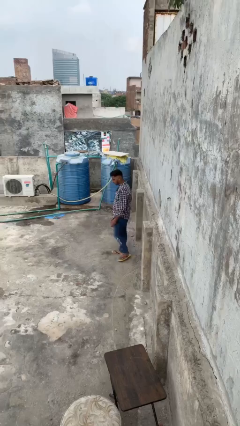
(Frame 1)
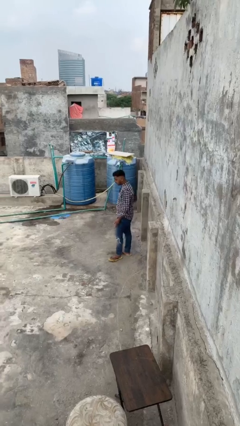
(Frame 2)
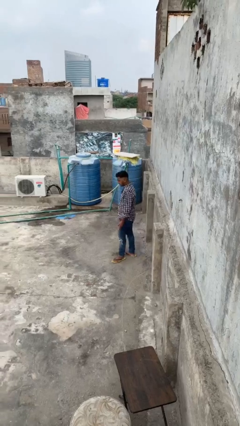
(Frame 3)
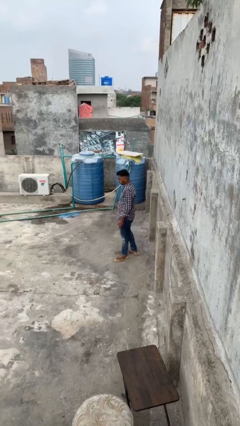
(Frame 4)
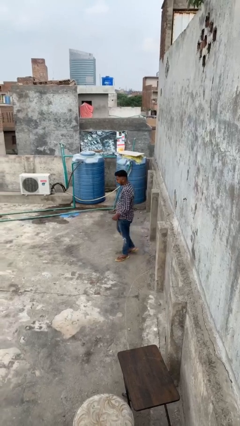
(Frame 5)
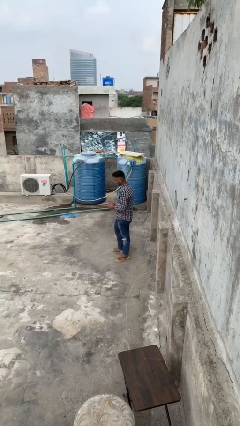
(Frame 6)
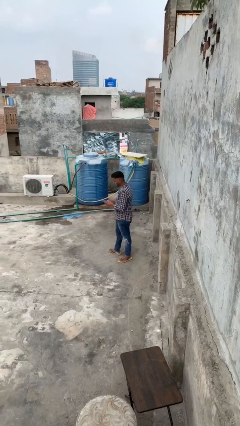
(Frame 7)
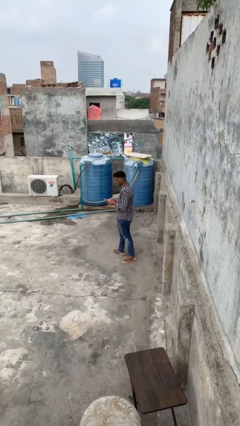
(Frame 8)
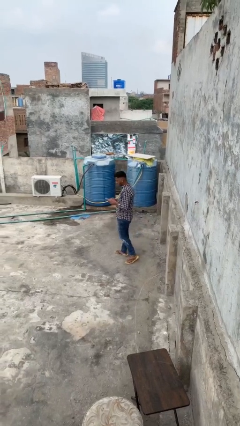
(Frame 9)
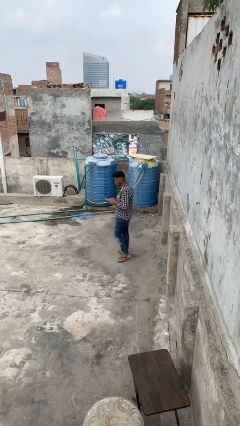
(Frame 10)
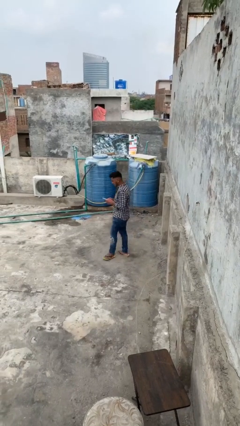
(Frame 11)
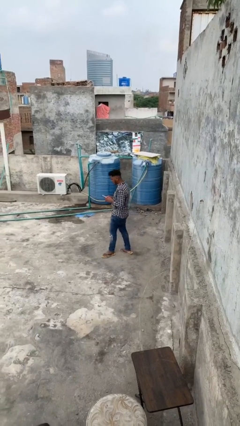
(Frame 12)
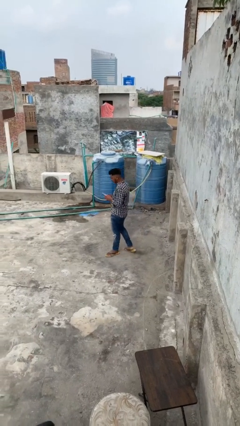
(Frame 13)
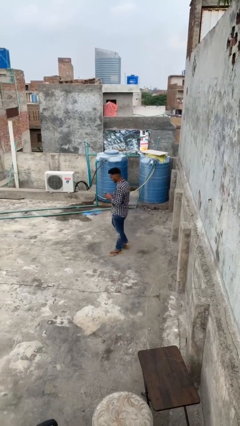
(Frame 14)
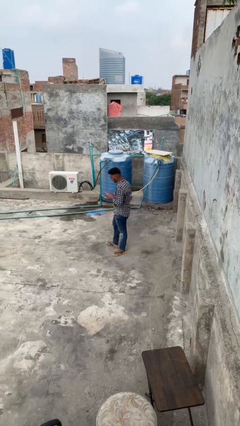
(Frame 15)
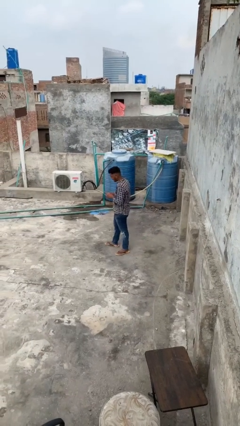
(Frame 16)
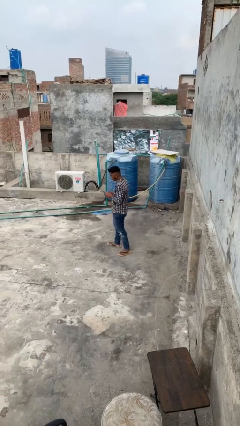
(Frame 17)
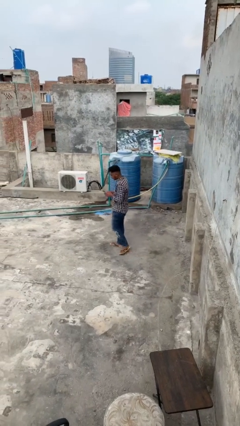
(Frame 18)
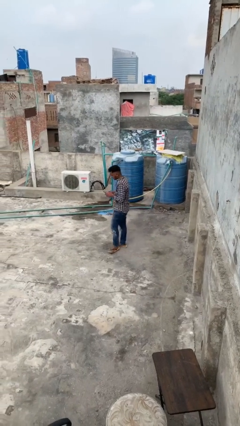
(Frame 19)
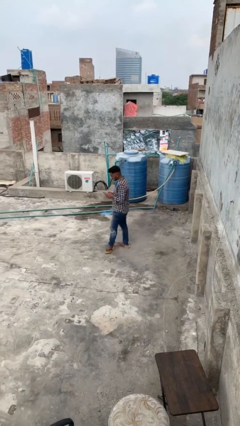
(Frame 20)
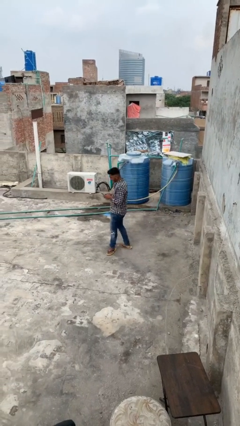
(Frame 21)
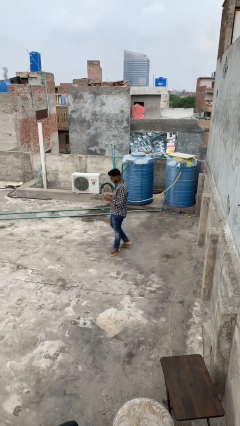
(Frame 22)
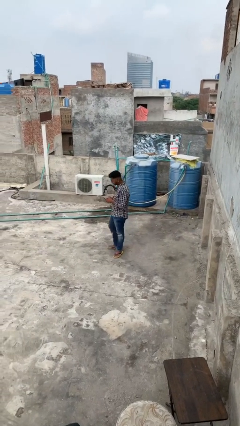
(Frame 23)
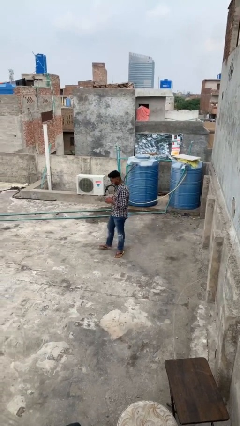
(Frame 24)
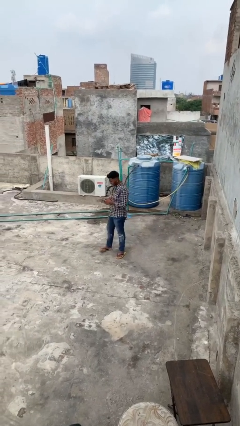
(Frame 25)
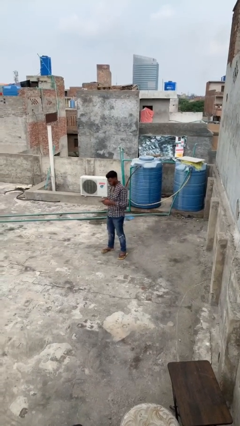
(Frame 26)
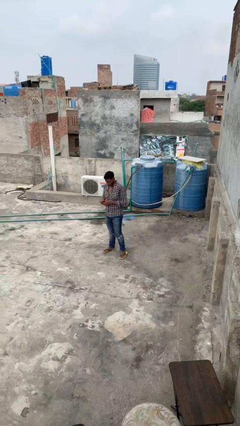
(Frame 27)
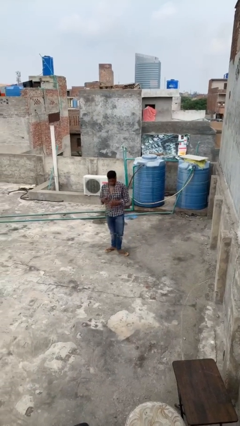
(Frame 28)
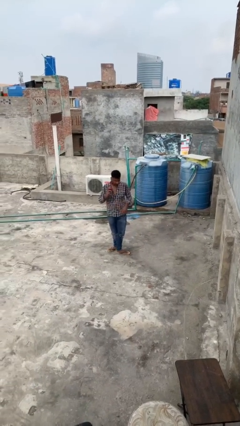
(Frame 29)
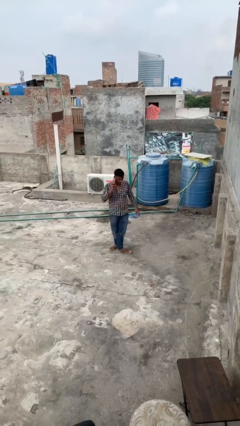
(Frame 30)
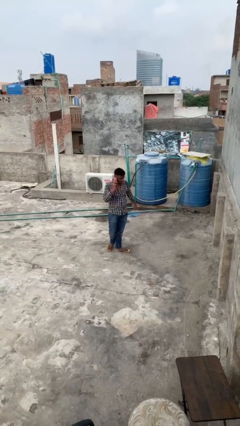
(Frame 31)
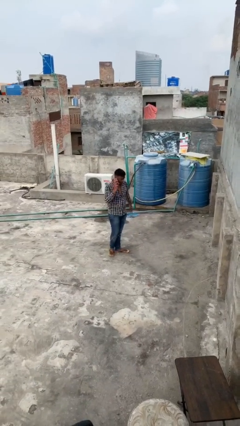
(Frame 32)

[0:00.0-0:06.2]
person texts on phone

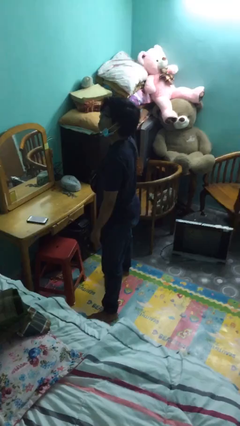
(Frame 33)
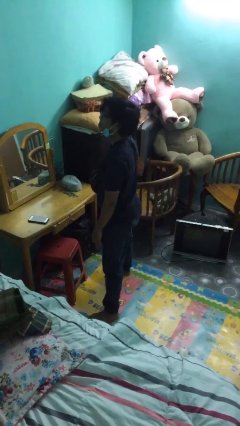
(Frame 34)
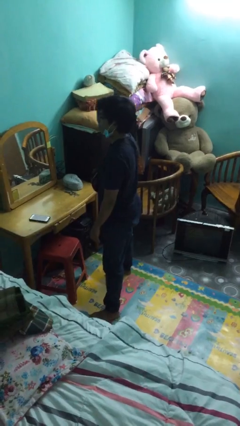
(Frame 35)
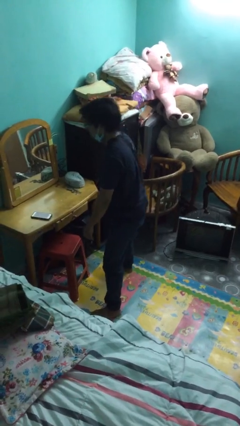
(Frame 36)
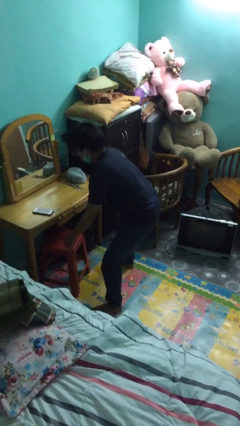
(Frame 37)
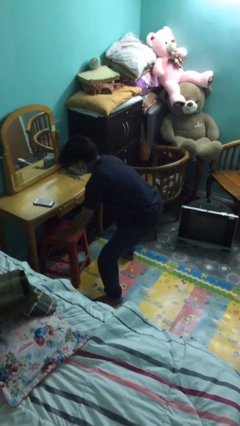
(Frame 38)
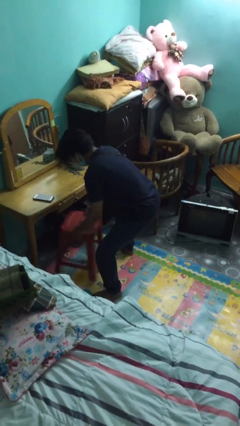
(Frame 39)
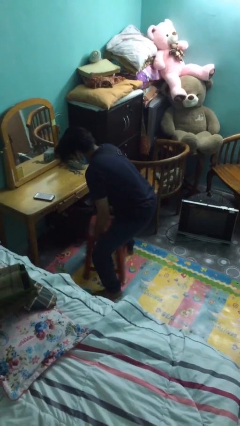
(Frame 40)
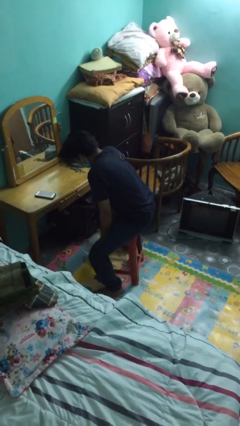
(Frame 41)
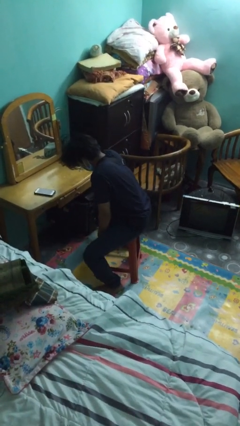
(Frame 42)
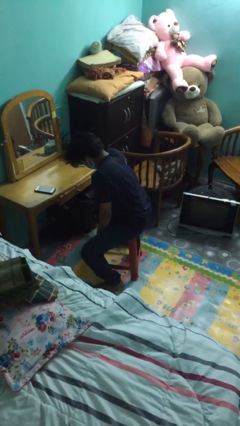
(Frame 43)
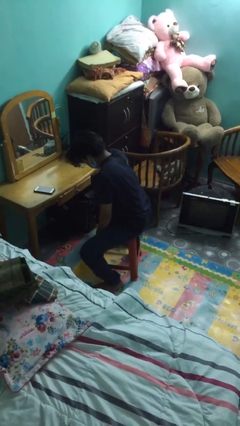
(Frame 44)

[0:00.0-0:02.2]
person sits down

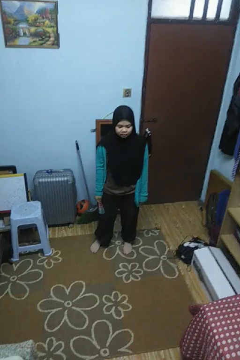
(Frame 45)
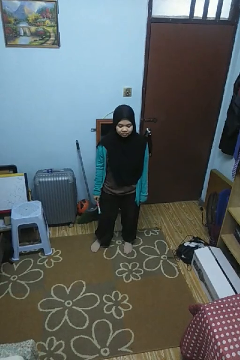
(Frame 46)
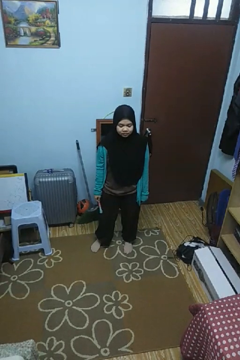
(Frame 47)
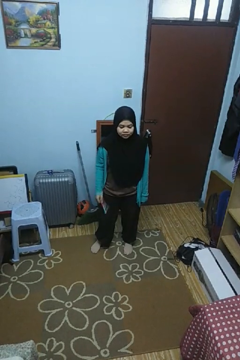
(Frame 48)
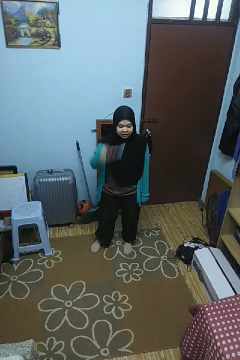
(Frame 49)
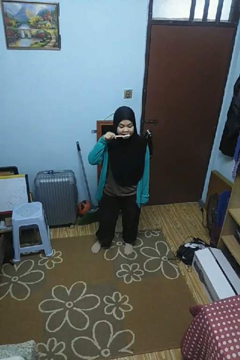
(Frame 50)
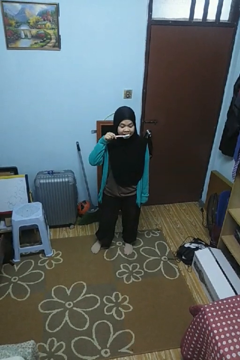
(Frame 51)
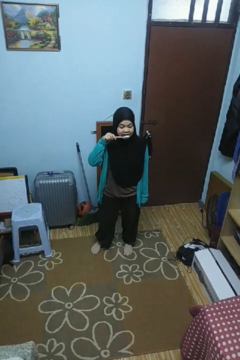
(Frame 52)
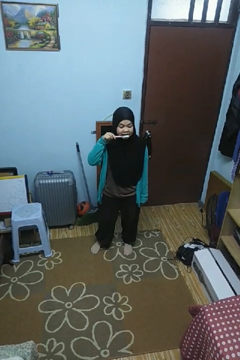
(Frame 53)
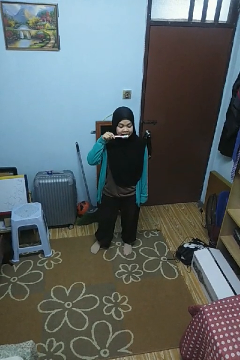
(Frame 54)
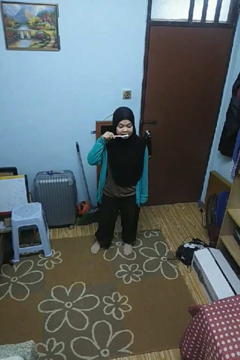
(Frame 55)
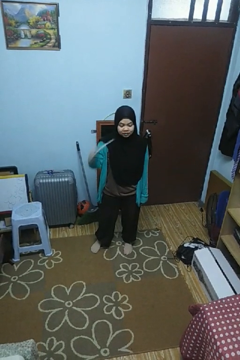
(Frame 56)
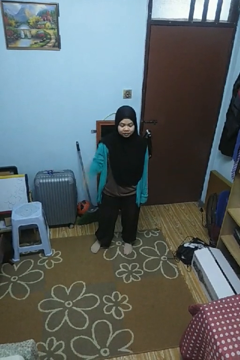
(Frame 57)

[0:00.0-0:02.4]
person brushes teeth

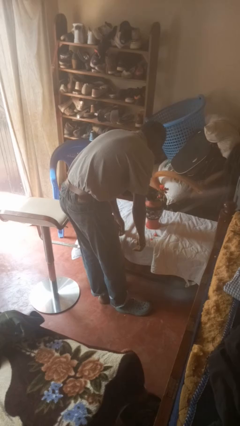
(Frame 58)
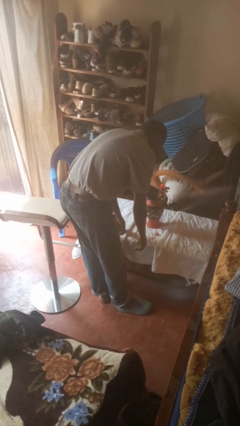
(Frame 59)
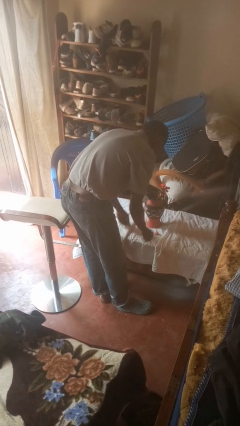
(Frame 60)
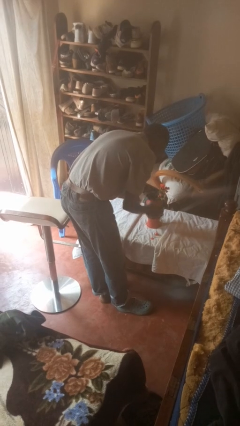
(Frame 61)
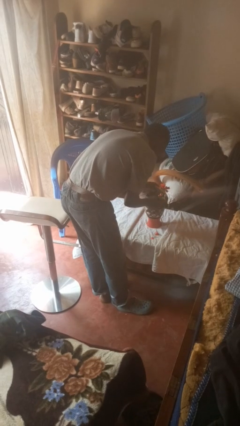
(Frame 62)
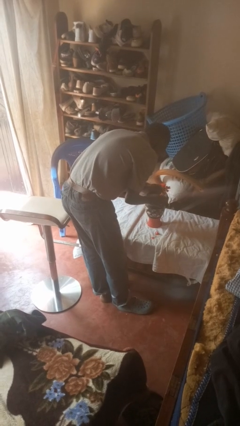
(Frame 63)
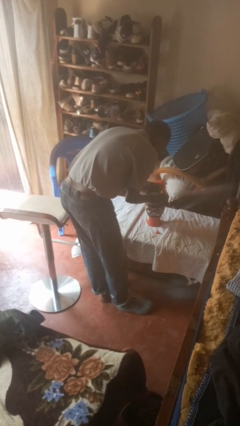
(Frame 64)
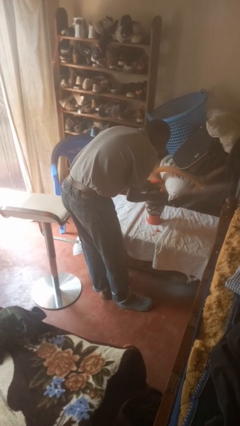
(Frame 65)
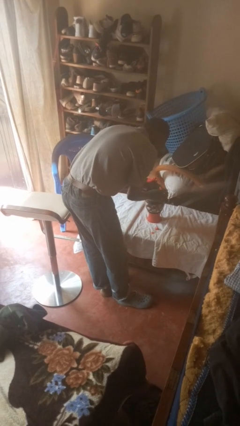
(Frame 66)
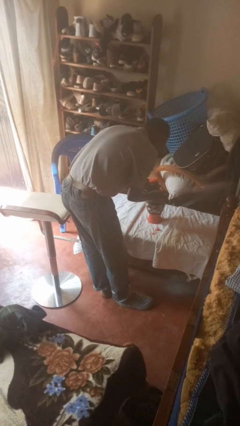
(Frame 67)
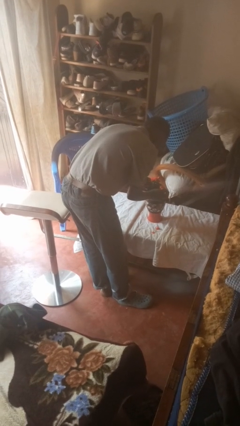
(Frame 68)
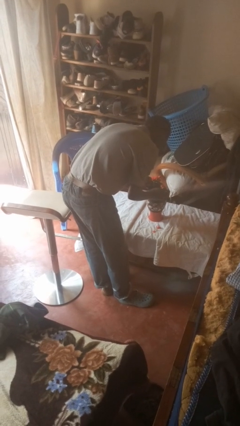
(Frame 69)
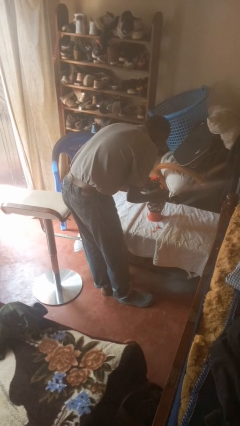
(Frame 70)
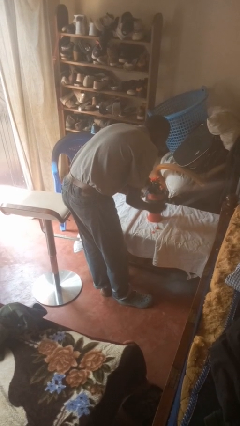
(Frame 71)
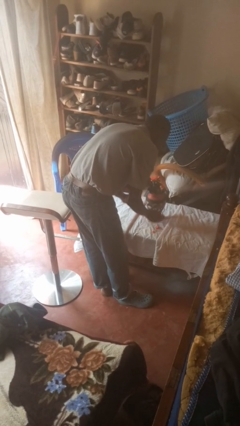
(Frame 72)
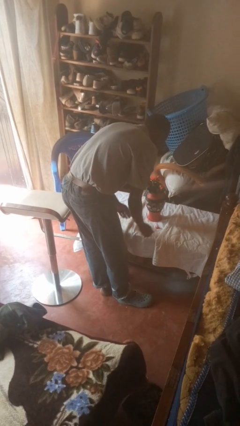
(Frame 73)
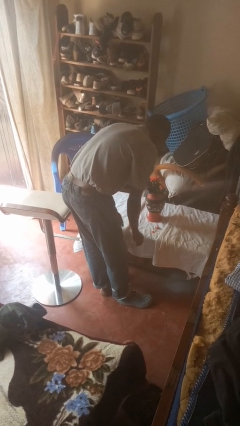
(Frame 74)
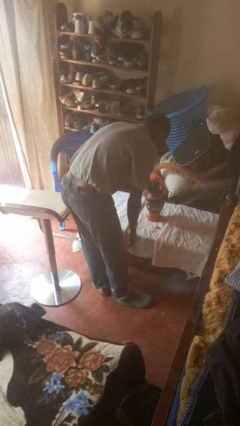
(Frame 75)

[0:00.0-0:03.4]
person arranges flowers in vase

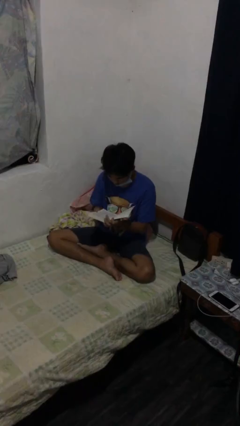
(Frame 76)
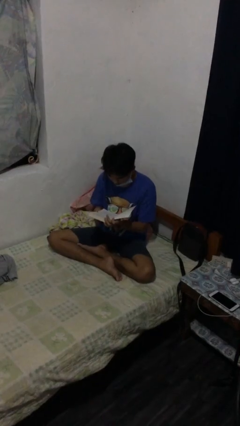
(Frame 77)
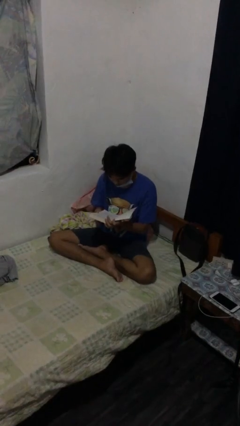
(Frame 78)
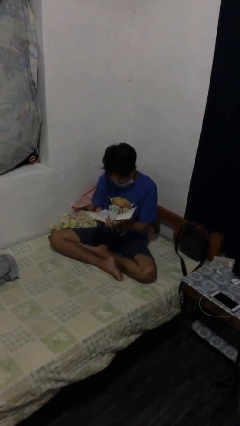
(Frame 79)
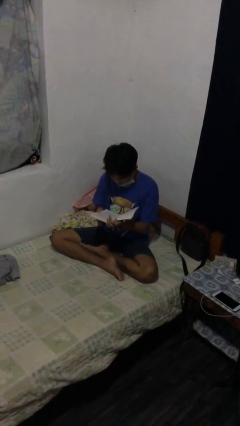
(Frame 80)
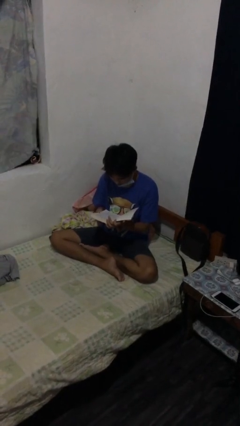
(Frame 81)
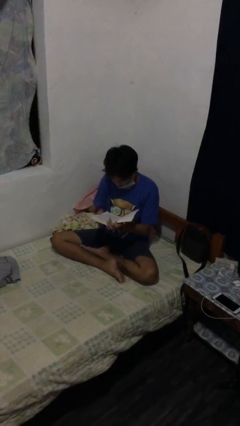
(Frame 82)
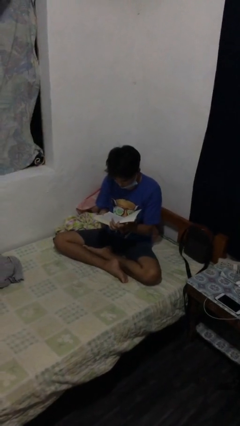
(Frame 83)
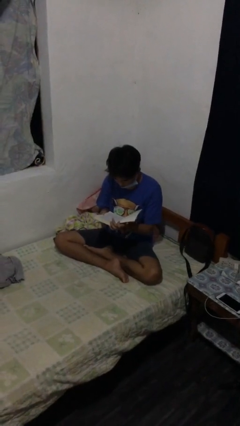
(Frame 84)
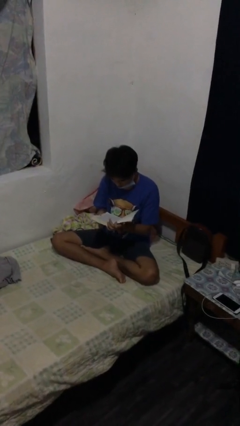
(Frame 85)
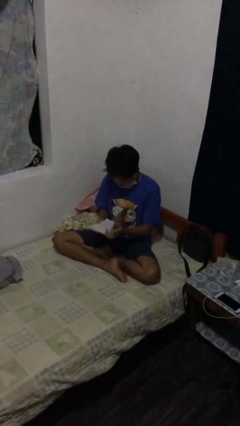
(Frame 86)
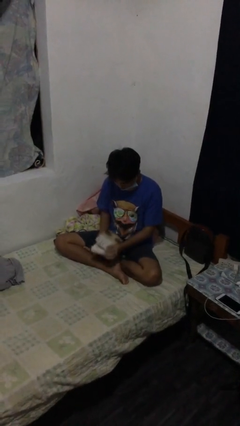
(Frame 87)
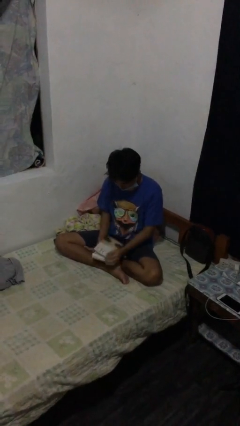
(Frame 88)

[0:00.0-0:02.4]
person reads document

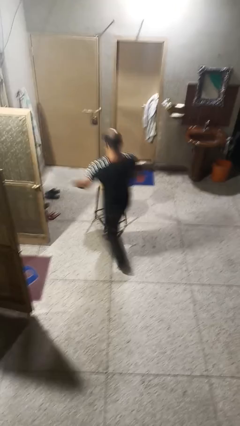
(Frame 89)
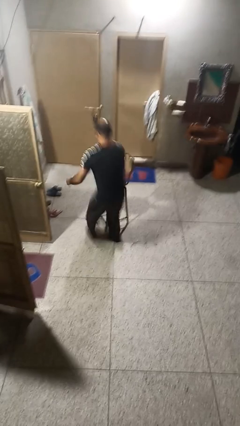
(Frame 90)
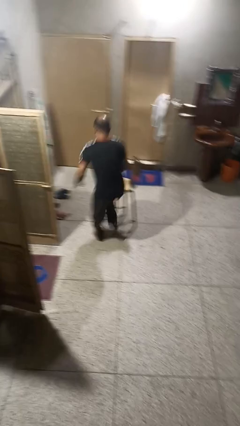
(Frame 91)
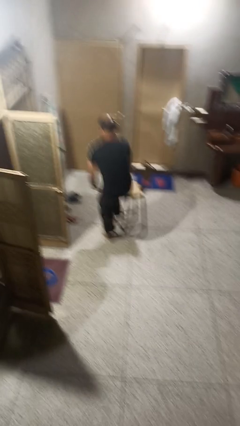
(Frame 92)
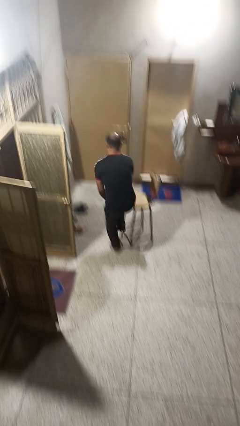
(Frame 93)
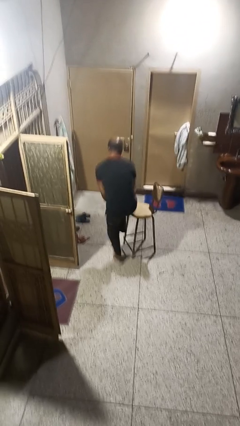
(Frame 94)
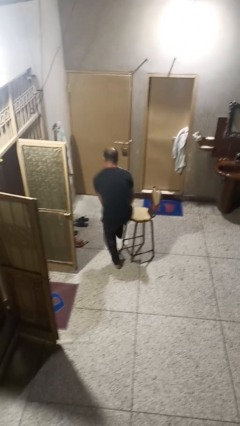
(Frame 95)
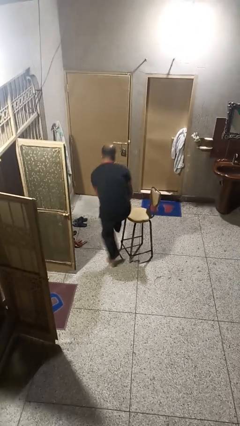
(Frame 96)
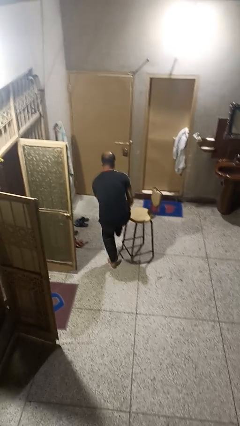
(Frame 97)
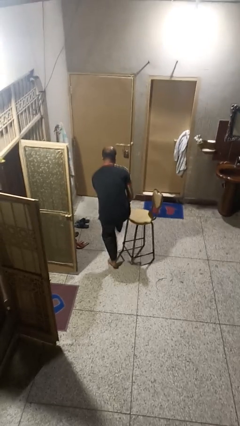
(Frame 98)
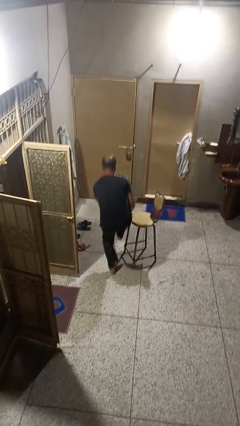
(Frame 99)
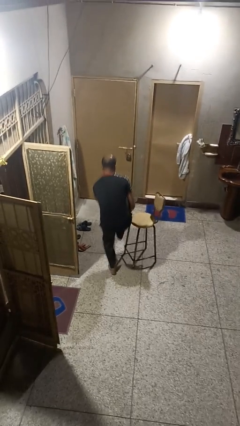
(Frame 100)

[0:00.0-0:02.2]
person stubs toe
